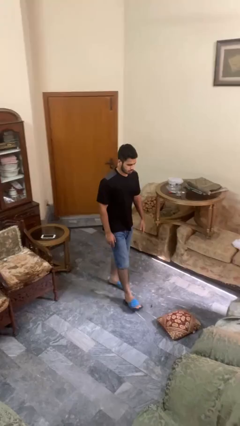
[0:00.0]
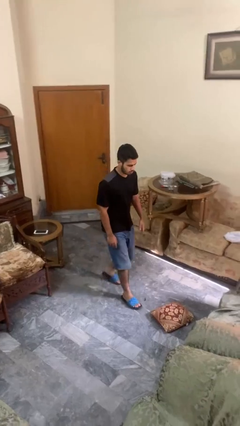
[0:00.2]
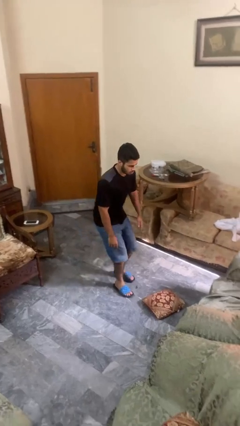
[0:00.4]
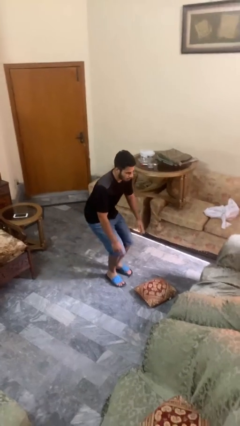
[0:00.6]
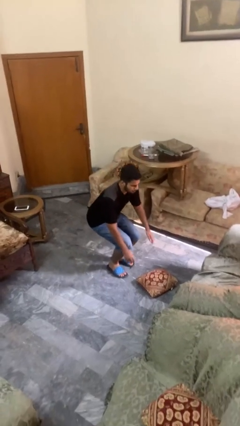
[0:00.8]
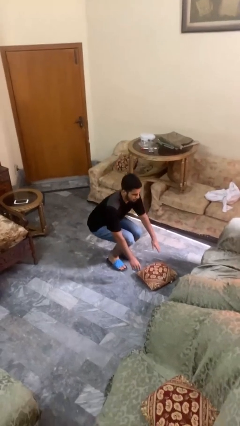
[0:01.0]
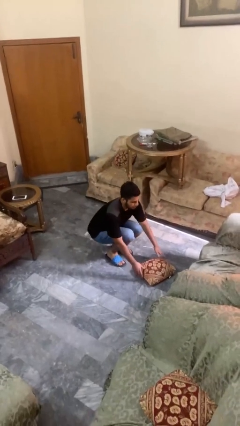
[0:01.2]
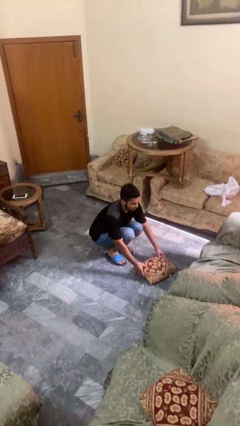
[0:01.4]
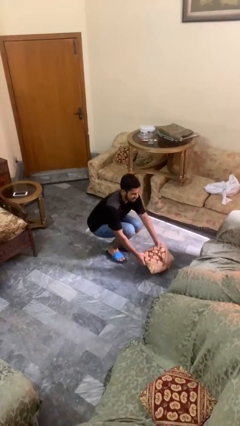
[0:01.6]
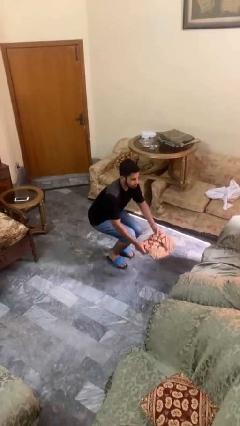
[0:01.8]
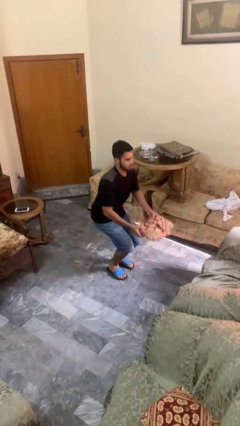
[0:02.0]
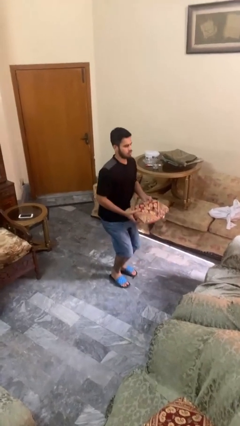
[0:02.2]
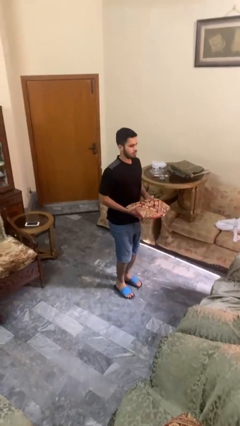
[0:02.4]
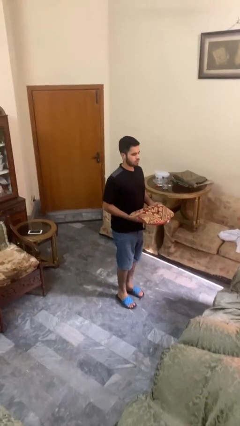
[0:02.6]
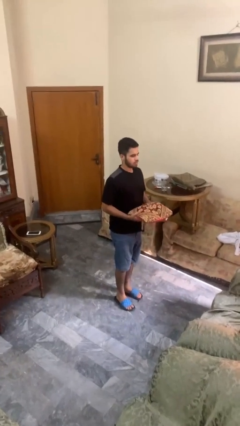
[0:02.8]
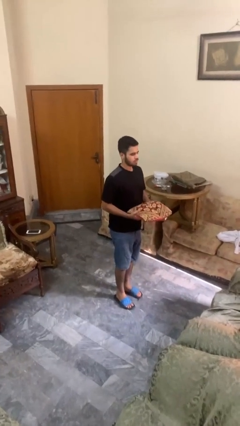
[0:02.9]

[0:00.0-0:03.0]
person picks up object from floor

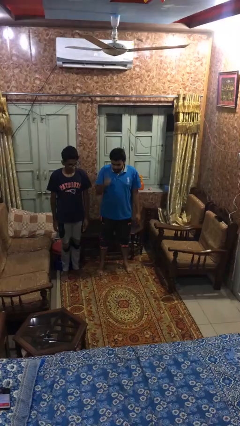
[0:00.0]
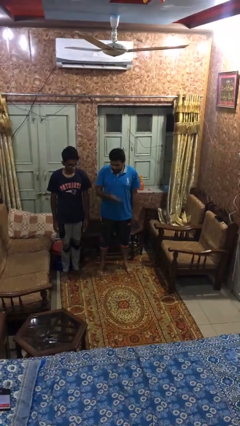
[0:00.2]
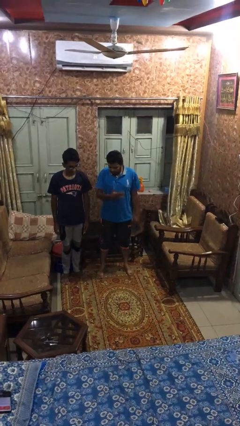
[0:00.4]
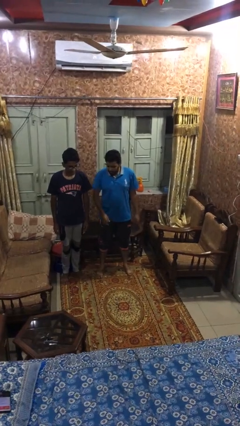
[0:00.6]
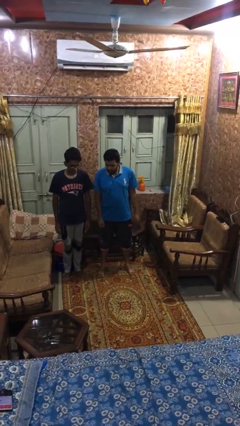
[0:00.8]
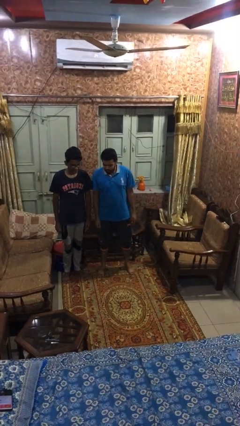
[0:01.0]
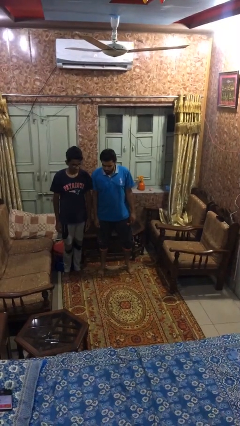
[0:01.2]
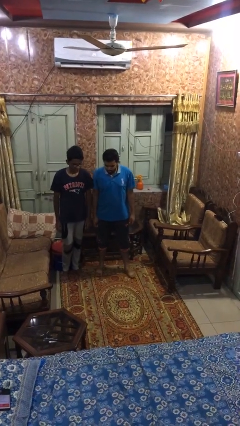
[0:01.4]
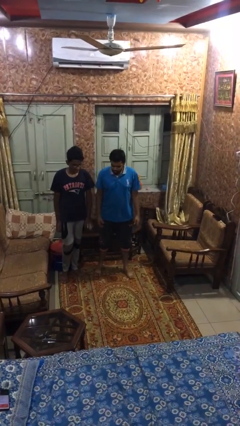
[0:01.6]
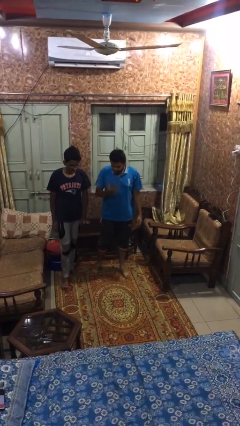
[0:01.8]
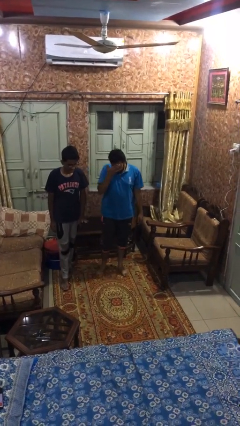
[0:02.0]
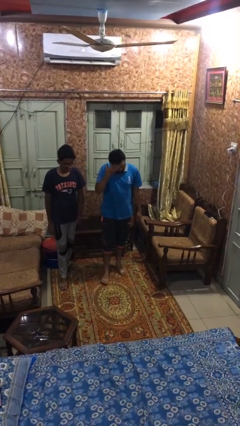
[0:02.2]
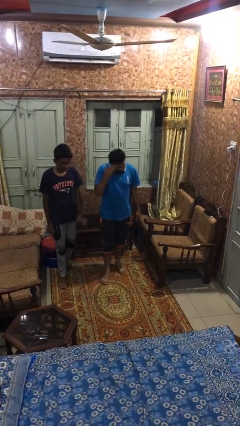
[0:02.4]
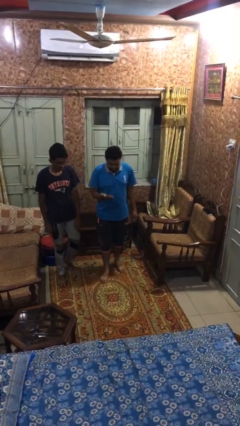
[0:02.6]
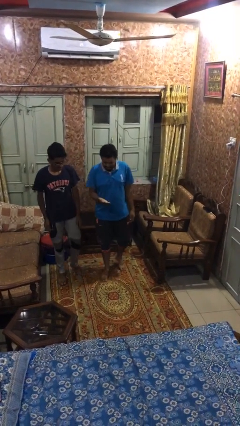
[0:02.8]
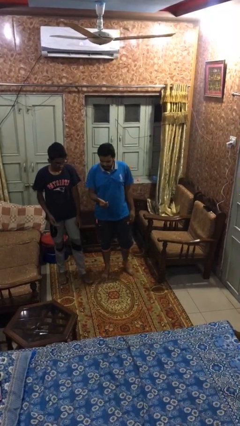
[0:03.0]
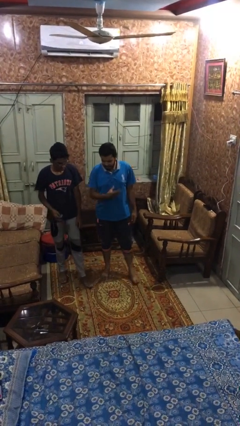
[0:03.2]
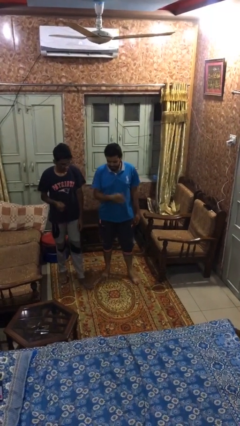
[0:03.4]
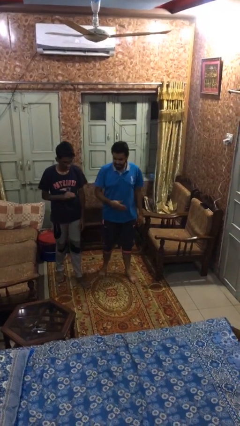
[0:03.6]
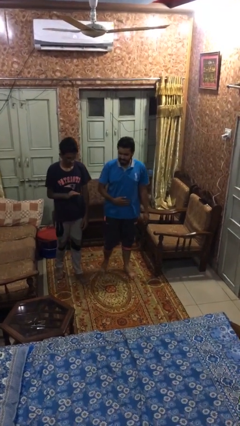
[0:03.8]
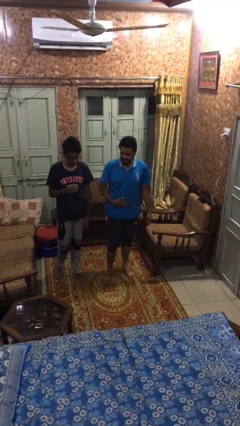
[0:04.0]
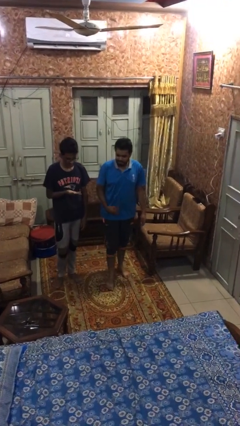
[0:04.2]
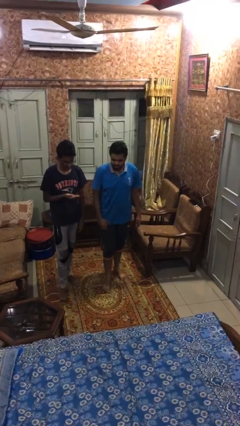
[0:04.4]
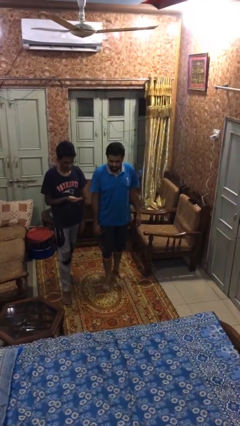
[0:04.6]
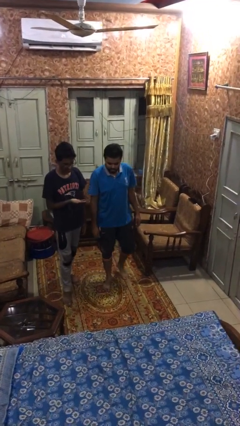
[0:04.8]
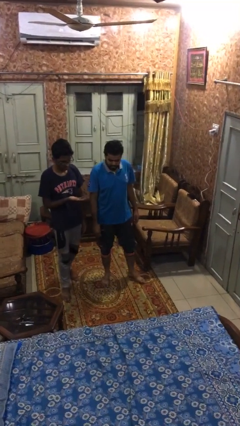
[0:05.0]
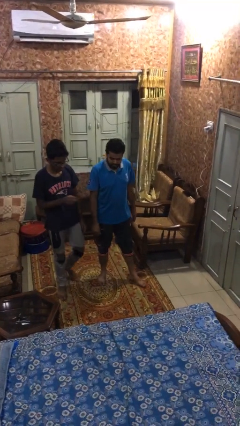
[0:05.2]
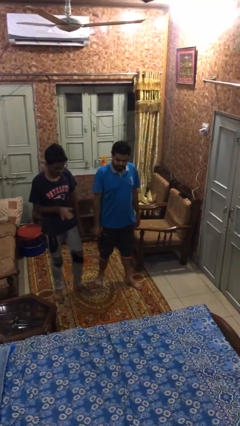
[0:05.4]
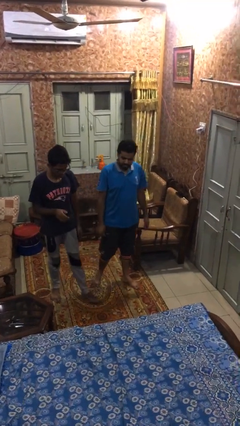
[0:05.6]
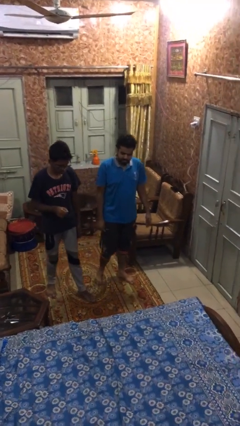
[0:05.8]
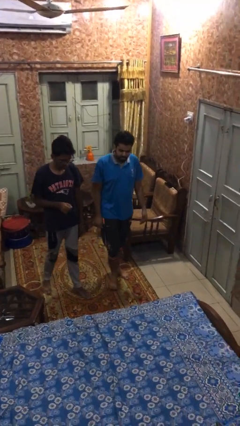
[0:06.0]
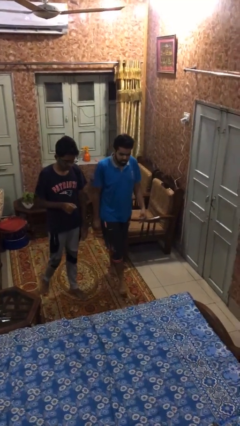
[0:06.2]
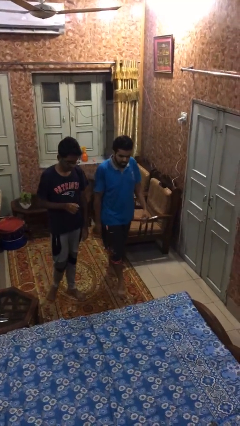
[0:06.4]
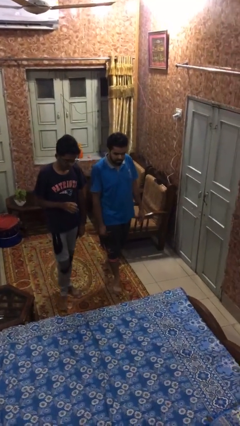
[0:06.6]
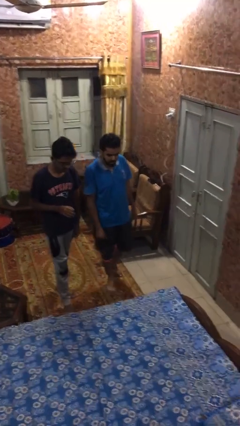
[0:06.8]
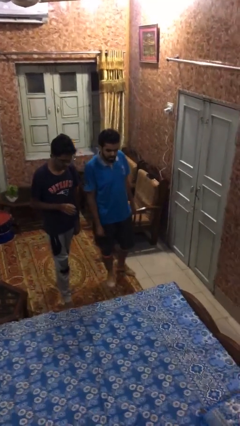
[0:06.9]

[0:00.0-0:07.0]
person talks to person

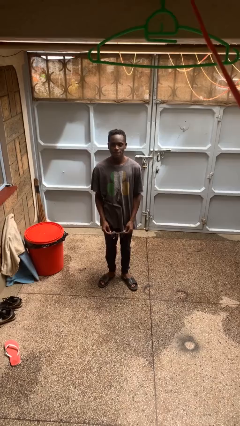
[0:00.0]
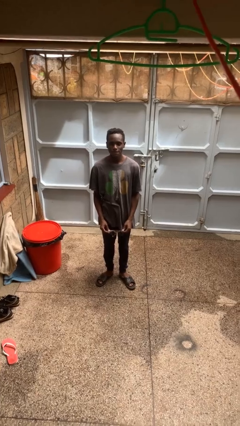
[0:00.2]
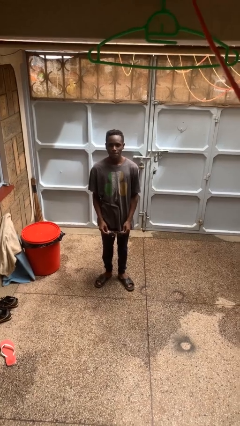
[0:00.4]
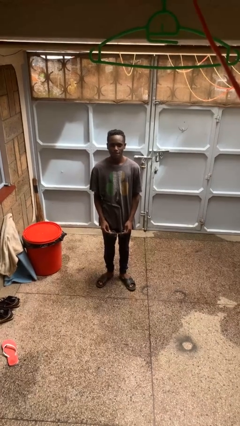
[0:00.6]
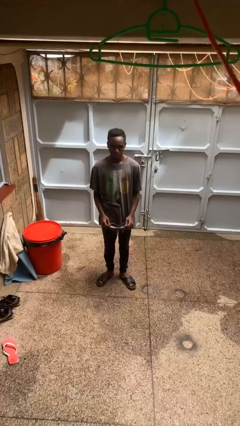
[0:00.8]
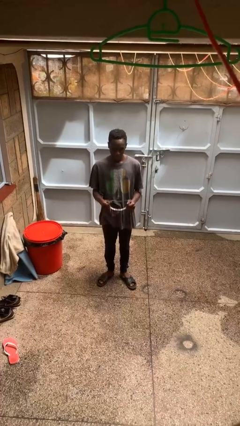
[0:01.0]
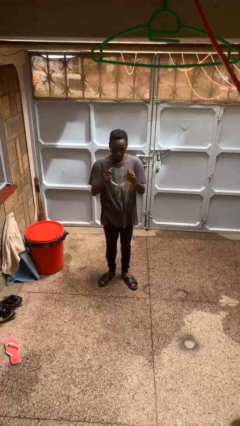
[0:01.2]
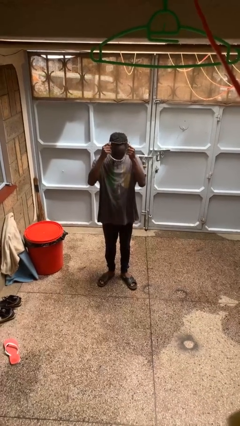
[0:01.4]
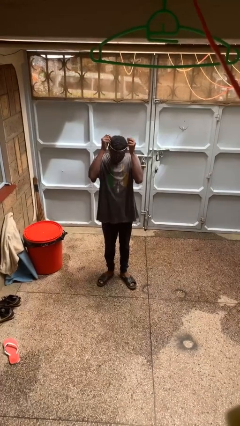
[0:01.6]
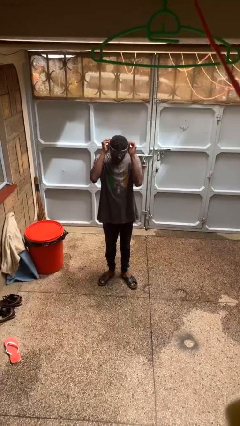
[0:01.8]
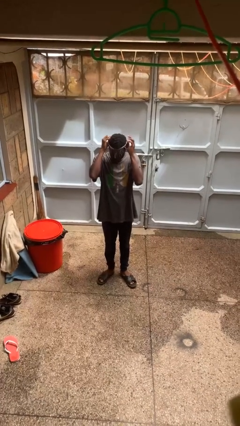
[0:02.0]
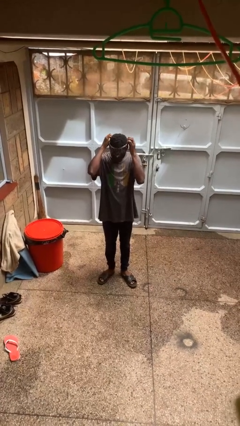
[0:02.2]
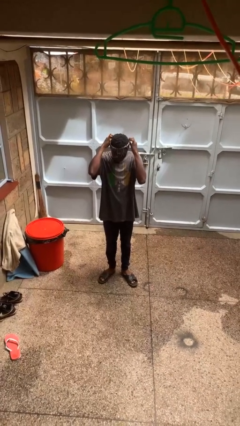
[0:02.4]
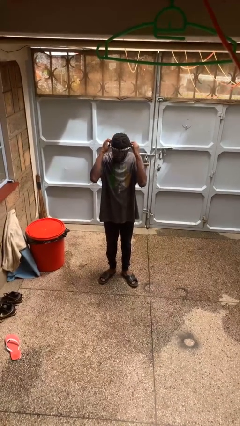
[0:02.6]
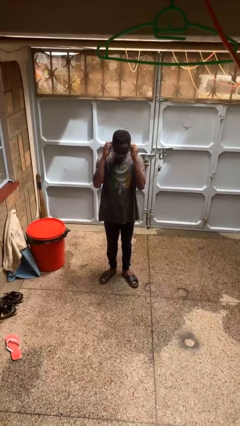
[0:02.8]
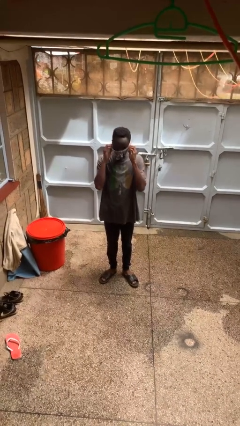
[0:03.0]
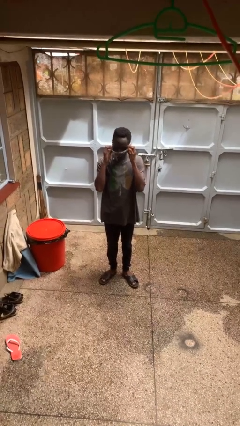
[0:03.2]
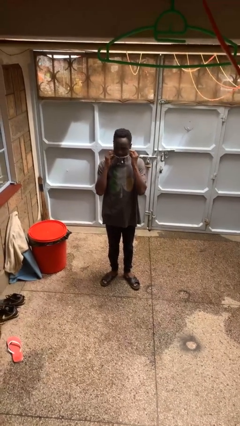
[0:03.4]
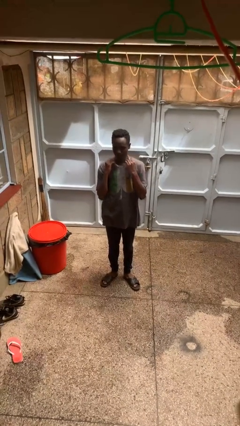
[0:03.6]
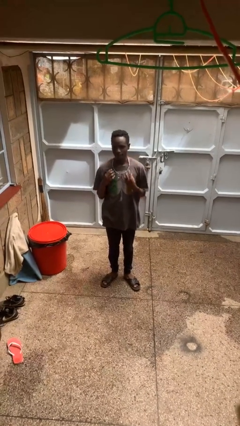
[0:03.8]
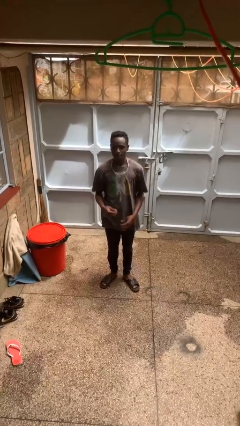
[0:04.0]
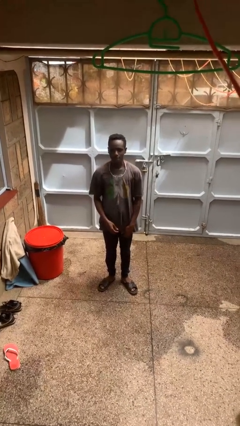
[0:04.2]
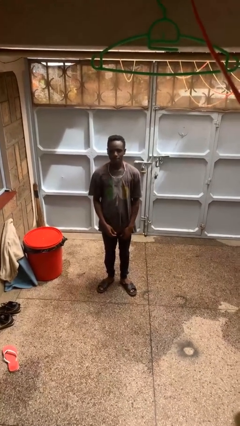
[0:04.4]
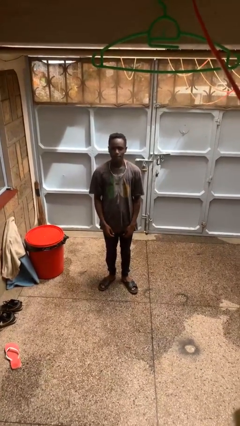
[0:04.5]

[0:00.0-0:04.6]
person puts on necklace

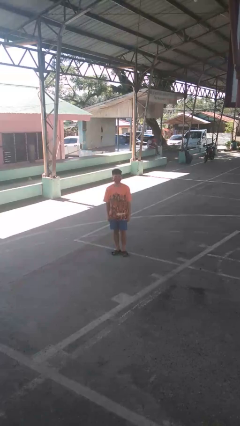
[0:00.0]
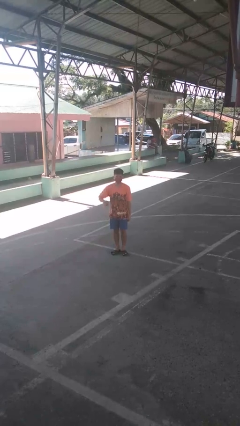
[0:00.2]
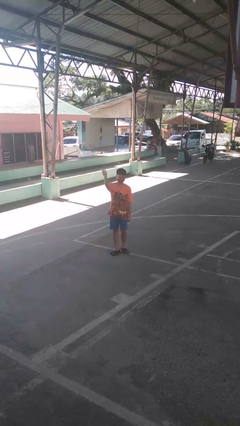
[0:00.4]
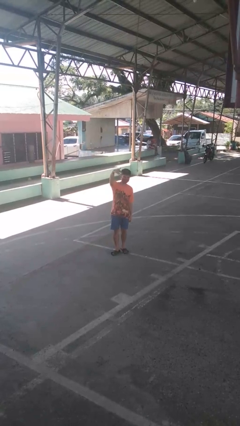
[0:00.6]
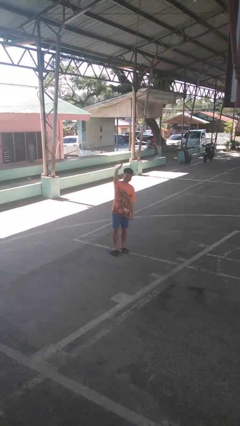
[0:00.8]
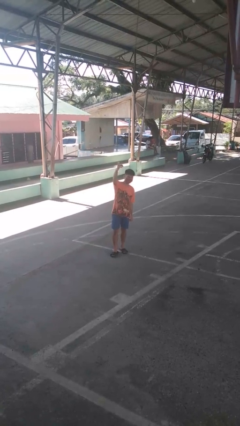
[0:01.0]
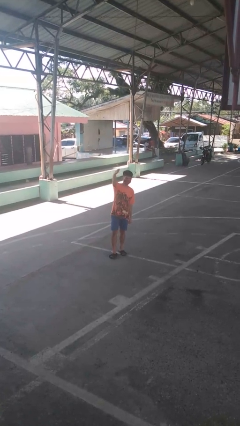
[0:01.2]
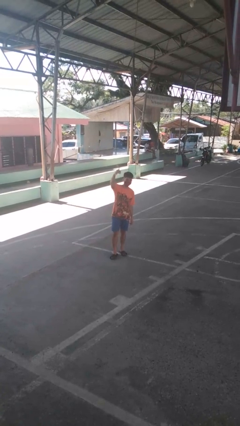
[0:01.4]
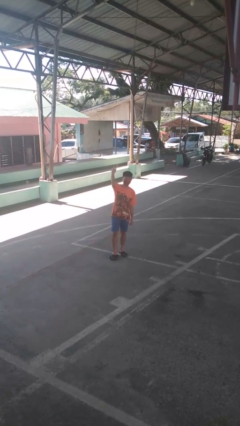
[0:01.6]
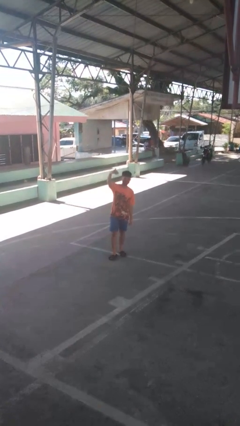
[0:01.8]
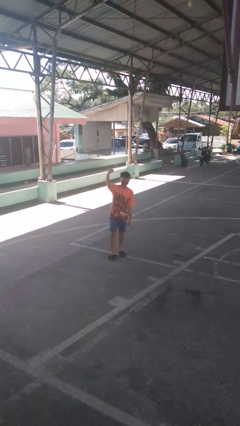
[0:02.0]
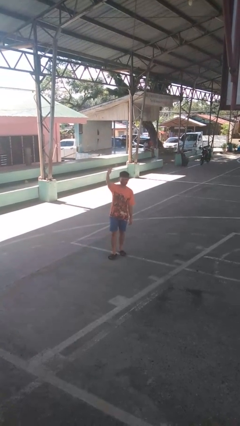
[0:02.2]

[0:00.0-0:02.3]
person gestures come here

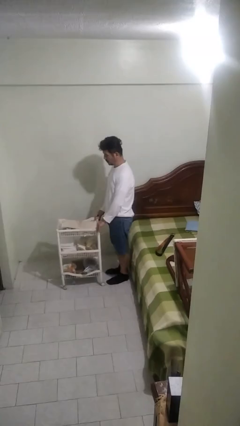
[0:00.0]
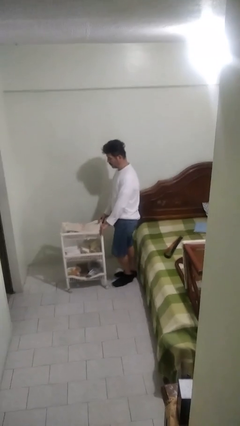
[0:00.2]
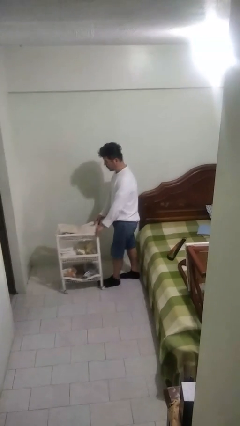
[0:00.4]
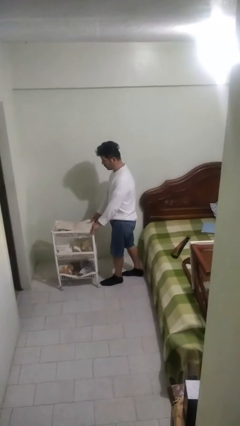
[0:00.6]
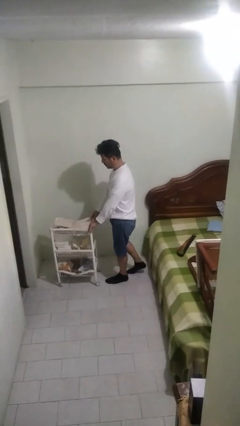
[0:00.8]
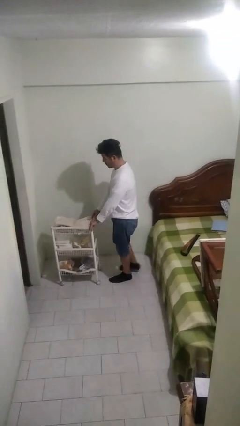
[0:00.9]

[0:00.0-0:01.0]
person pushes wheeled cart
